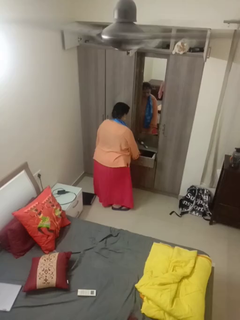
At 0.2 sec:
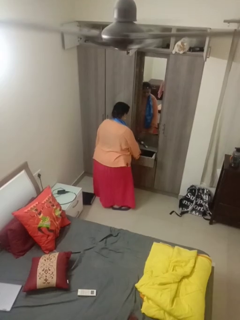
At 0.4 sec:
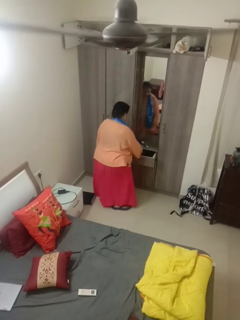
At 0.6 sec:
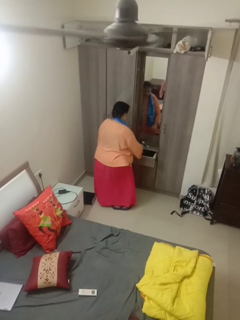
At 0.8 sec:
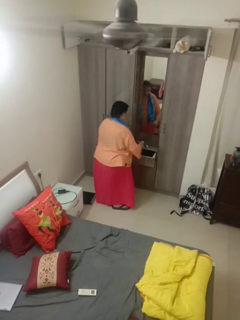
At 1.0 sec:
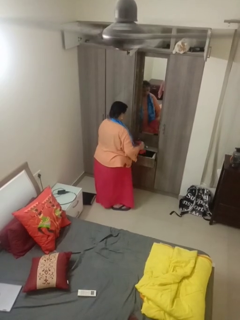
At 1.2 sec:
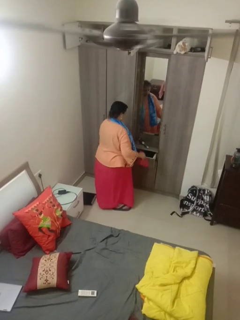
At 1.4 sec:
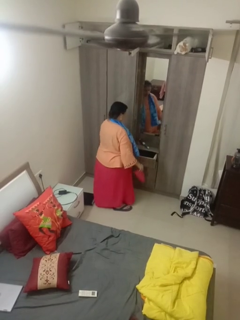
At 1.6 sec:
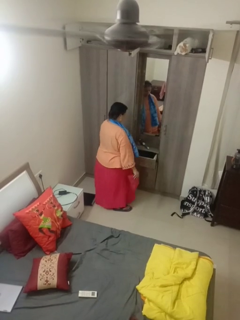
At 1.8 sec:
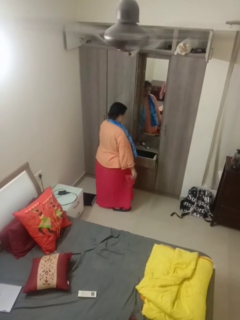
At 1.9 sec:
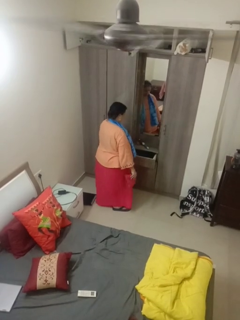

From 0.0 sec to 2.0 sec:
person takes clothes from dresser

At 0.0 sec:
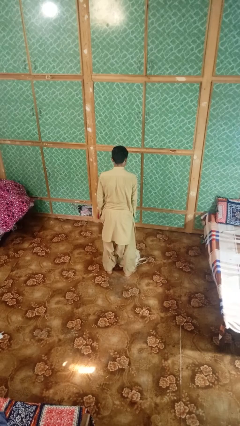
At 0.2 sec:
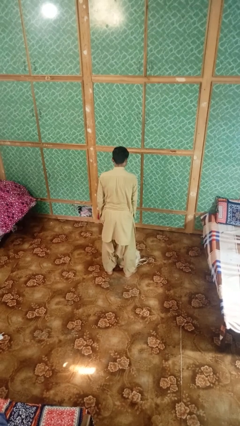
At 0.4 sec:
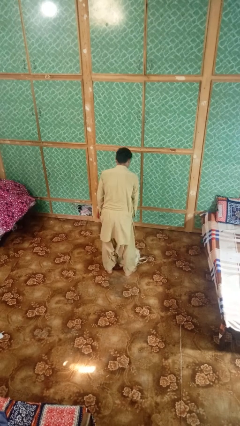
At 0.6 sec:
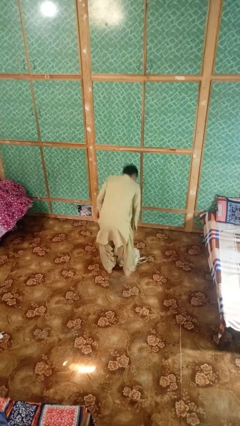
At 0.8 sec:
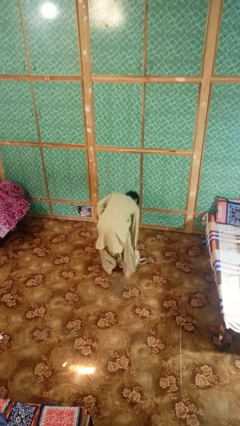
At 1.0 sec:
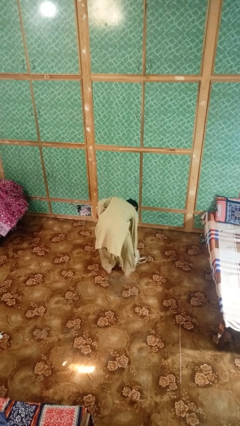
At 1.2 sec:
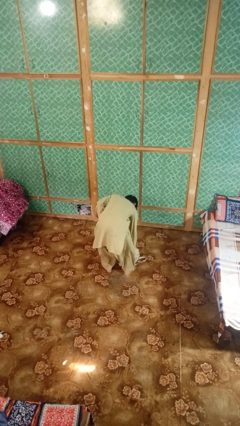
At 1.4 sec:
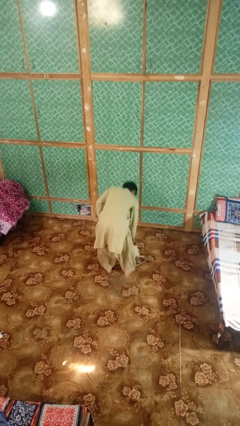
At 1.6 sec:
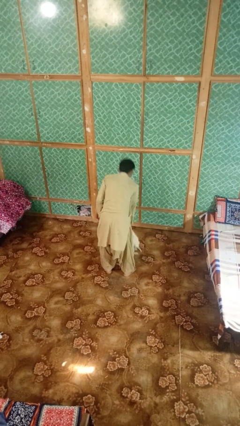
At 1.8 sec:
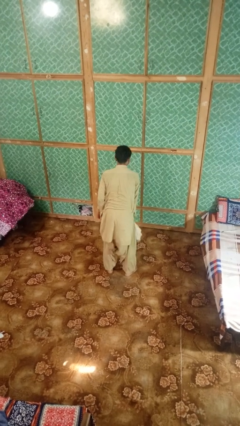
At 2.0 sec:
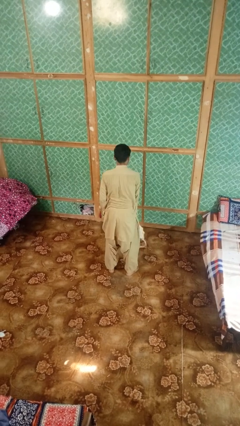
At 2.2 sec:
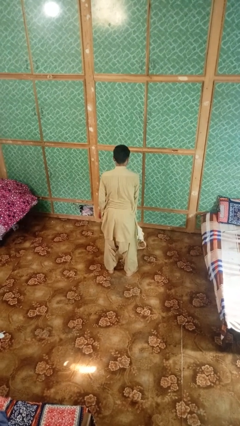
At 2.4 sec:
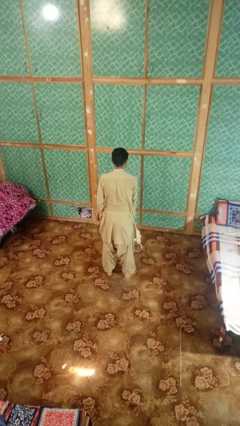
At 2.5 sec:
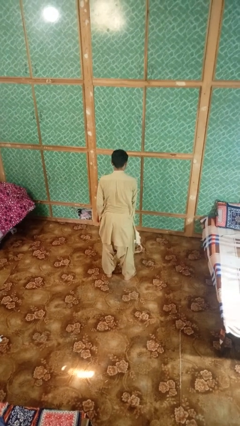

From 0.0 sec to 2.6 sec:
person picks up object from floor

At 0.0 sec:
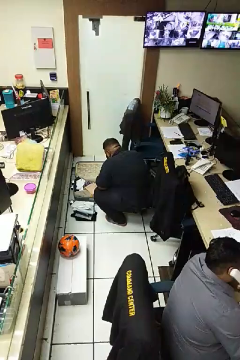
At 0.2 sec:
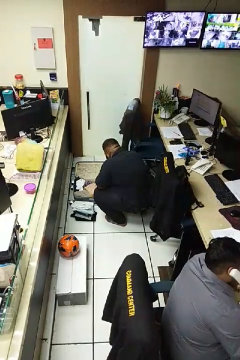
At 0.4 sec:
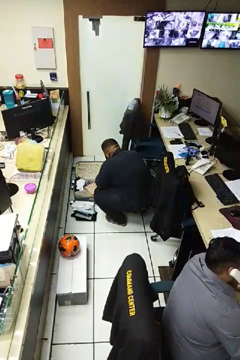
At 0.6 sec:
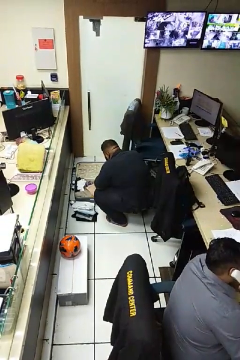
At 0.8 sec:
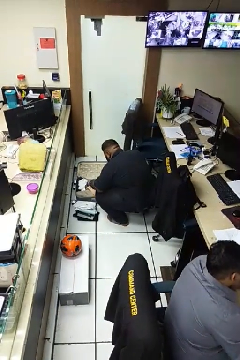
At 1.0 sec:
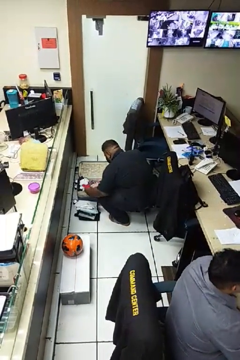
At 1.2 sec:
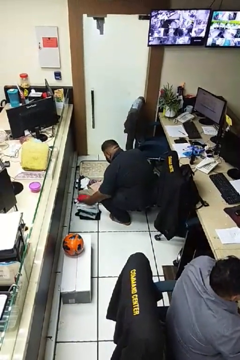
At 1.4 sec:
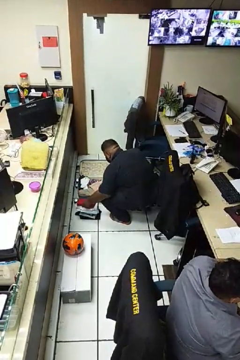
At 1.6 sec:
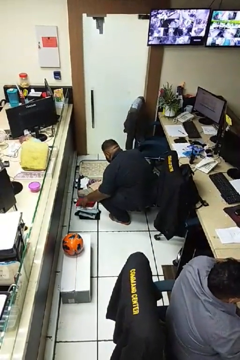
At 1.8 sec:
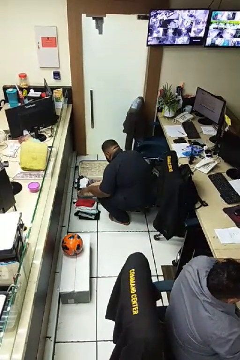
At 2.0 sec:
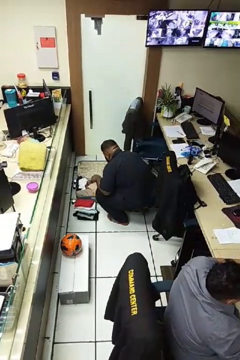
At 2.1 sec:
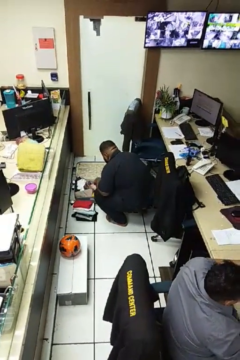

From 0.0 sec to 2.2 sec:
person unloads clothes from suitcase

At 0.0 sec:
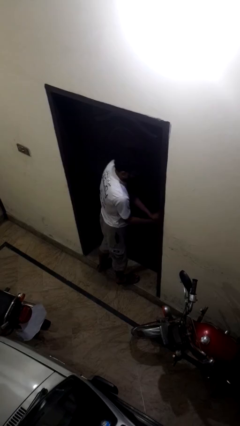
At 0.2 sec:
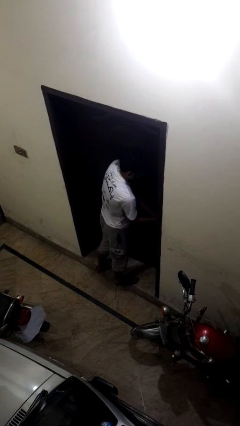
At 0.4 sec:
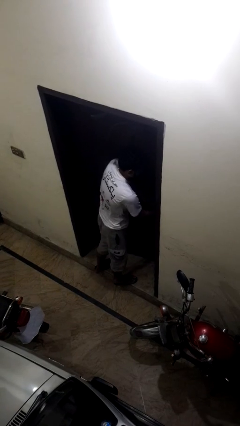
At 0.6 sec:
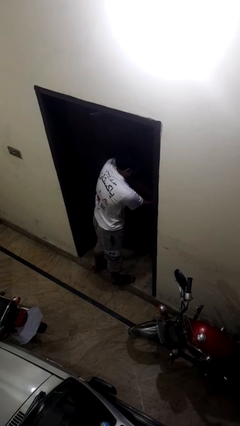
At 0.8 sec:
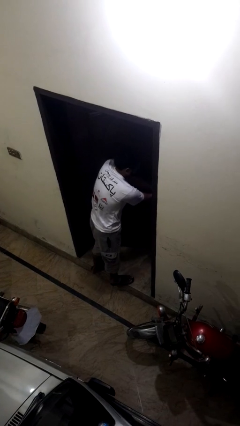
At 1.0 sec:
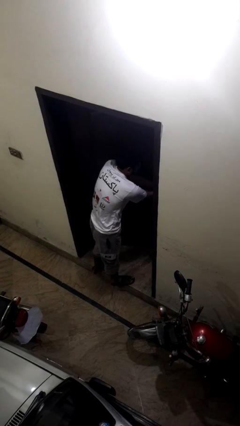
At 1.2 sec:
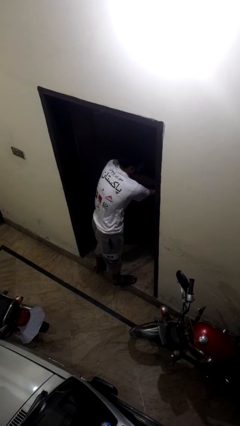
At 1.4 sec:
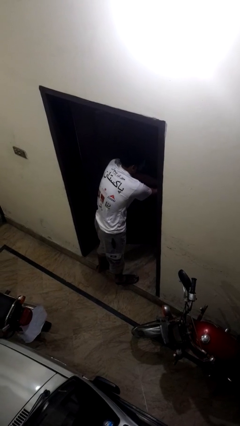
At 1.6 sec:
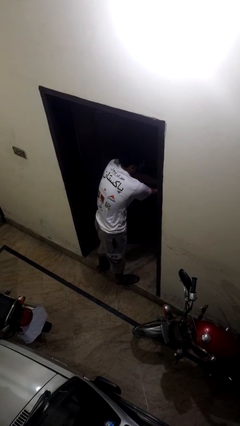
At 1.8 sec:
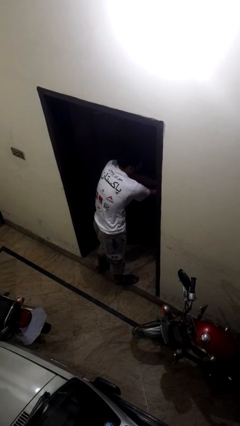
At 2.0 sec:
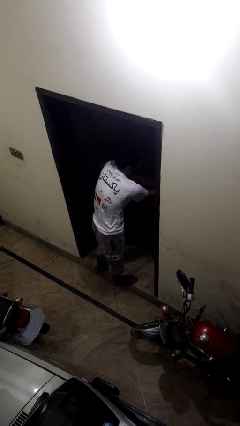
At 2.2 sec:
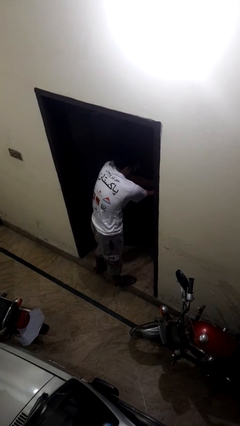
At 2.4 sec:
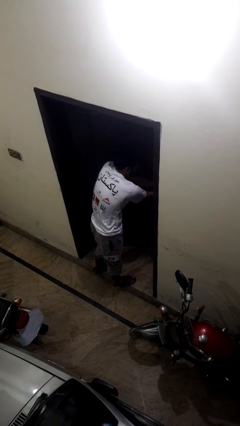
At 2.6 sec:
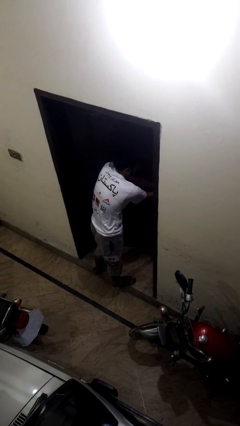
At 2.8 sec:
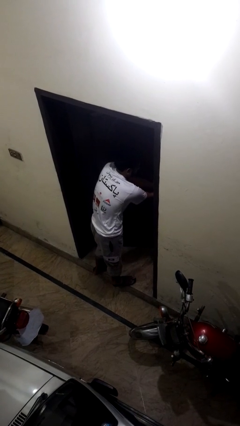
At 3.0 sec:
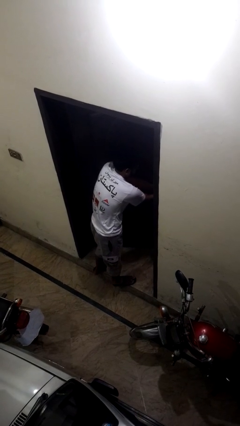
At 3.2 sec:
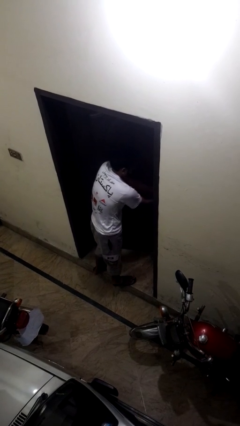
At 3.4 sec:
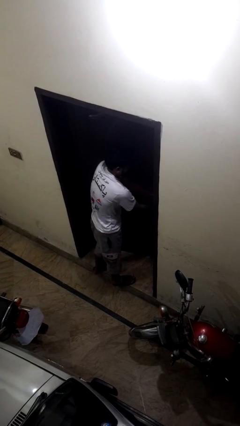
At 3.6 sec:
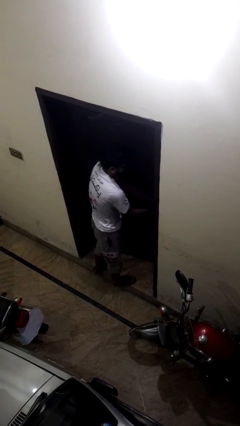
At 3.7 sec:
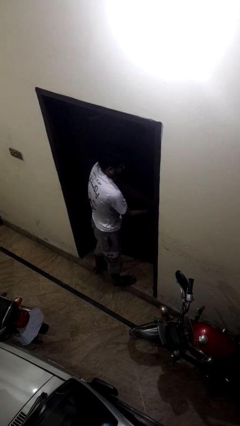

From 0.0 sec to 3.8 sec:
person opens facility door

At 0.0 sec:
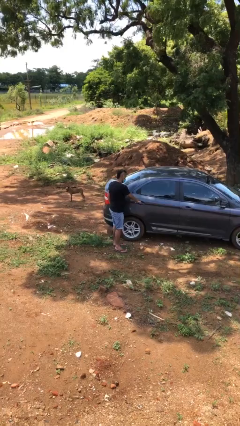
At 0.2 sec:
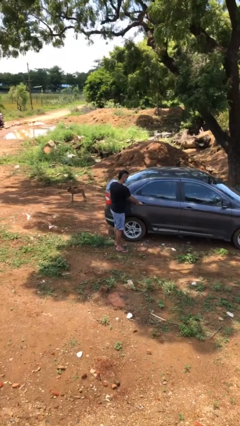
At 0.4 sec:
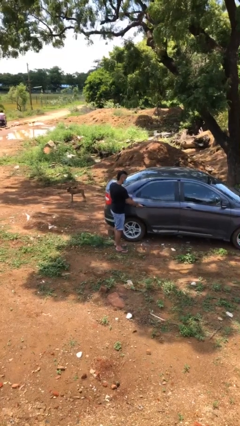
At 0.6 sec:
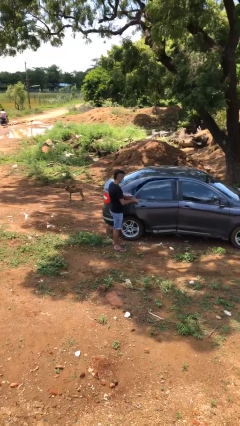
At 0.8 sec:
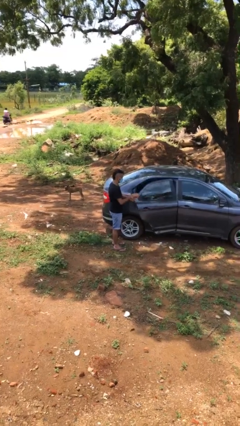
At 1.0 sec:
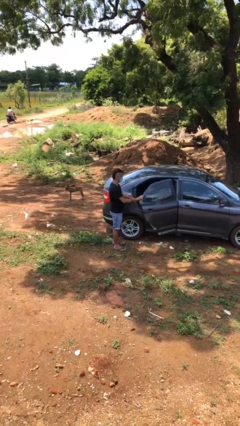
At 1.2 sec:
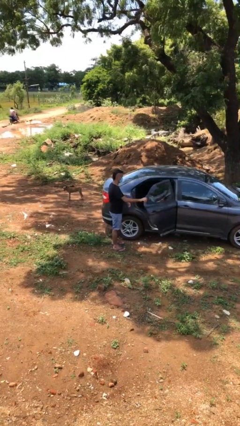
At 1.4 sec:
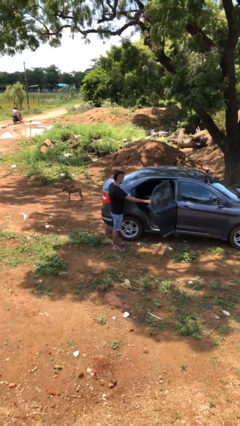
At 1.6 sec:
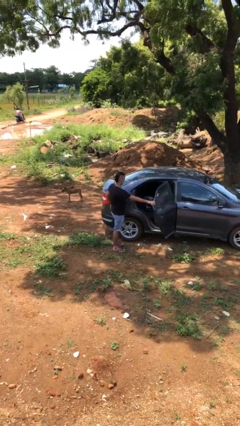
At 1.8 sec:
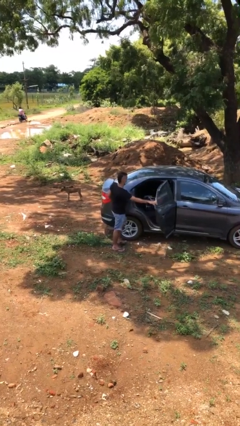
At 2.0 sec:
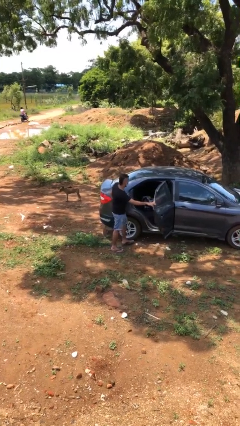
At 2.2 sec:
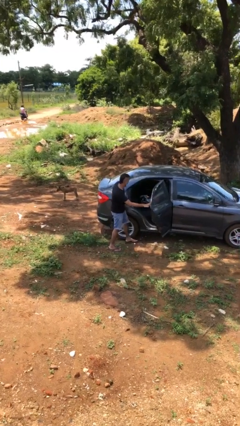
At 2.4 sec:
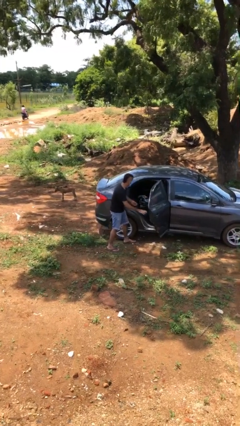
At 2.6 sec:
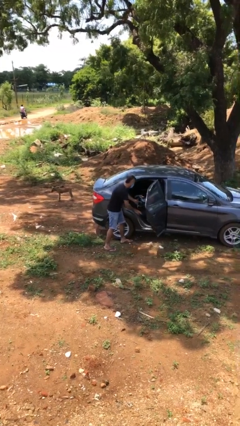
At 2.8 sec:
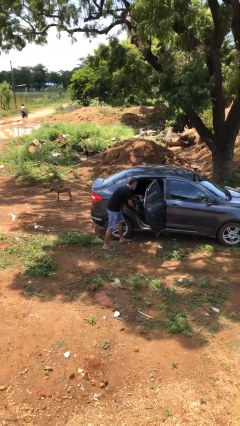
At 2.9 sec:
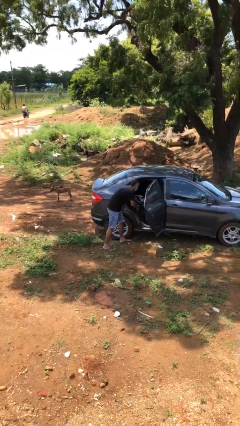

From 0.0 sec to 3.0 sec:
person opens car door

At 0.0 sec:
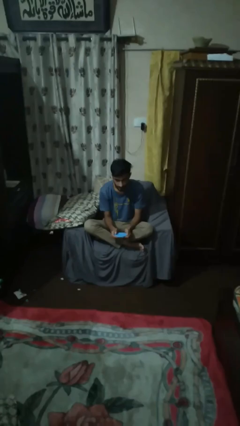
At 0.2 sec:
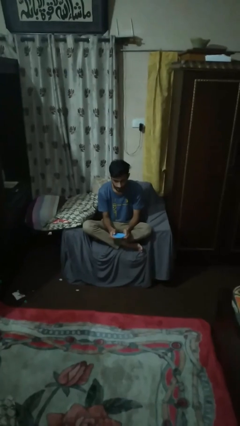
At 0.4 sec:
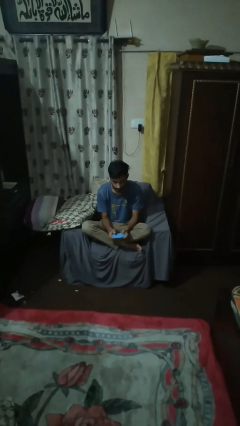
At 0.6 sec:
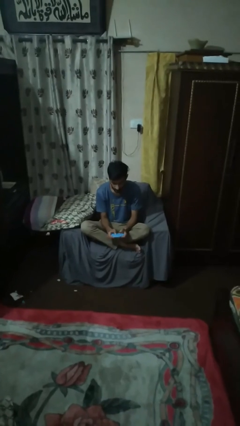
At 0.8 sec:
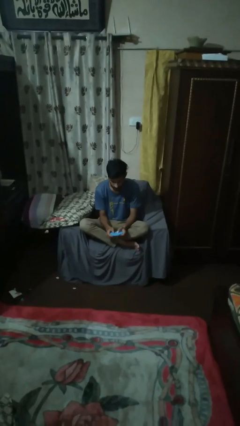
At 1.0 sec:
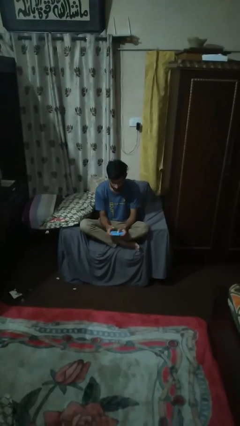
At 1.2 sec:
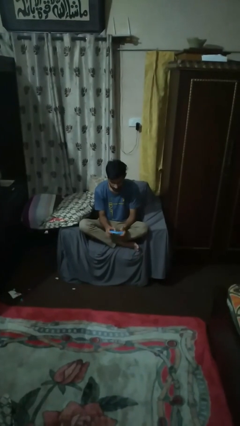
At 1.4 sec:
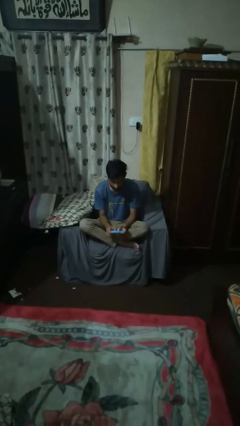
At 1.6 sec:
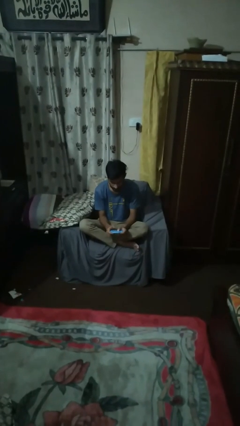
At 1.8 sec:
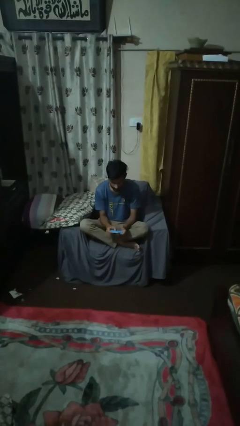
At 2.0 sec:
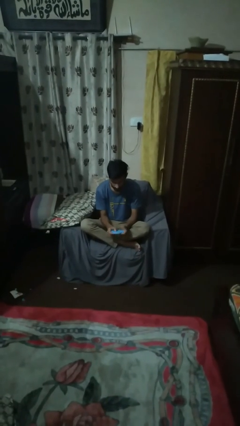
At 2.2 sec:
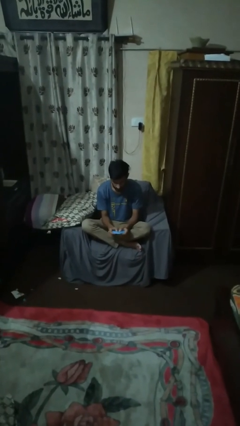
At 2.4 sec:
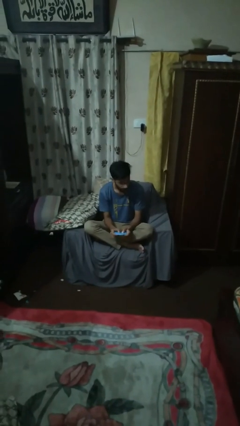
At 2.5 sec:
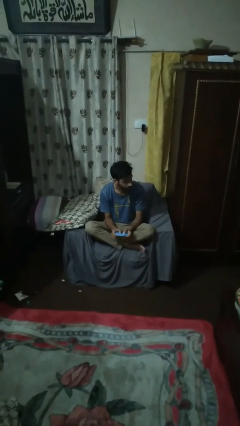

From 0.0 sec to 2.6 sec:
person interacts with handheld game

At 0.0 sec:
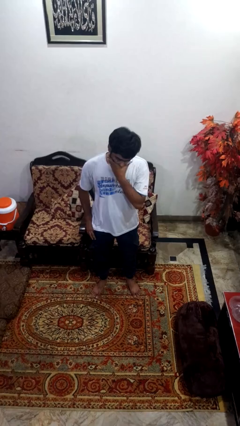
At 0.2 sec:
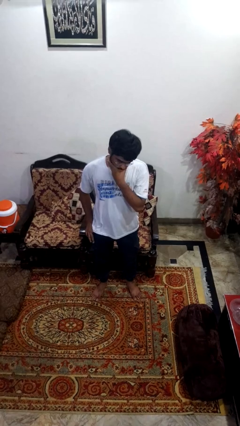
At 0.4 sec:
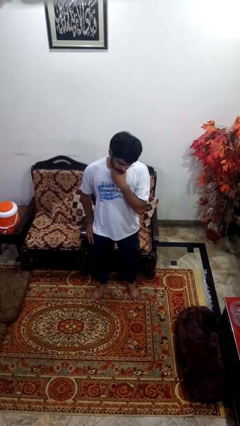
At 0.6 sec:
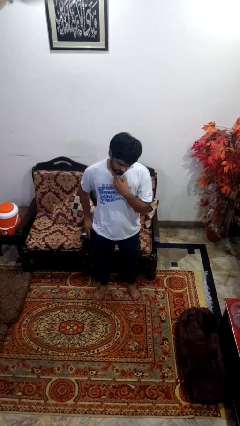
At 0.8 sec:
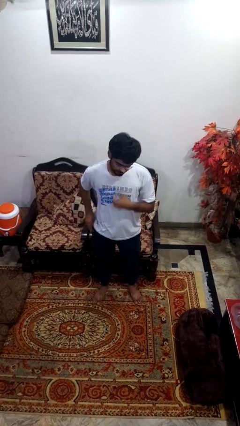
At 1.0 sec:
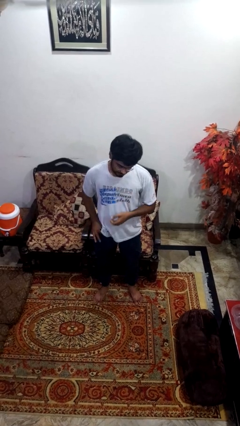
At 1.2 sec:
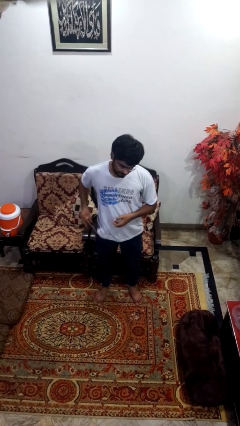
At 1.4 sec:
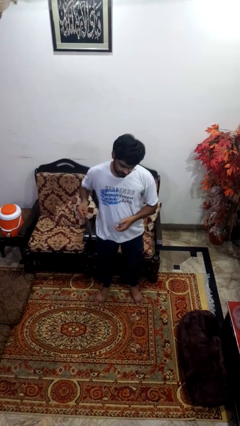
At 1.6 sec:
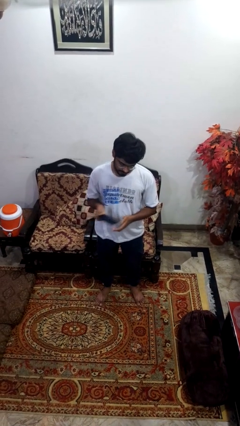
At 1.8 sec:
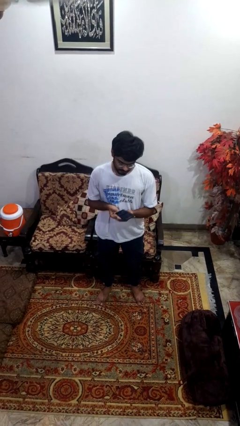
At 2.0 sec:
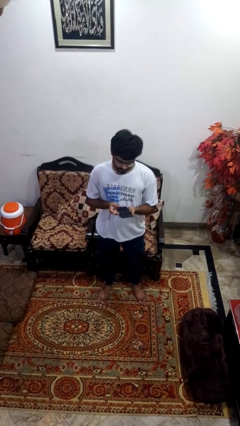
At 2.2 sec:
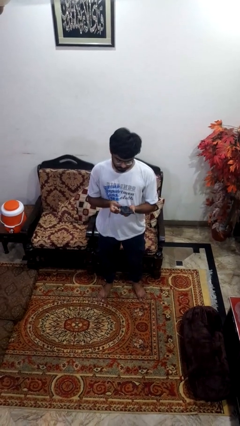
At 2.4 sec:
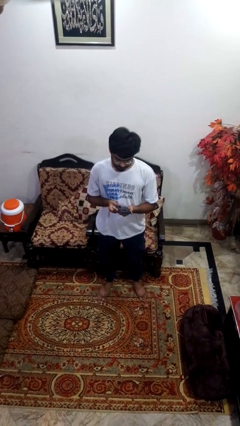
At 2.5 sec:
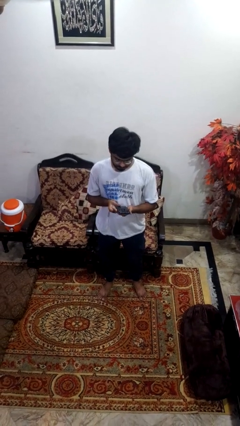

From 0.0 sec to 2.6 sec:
person takes phone from pocket
